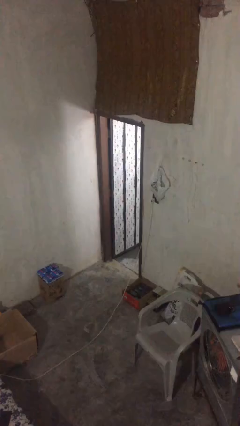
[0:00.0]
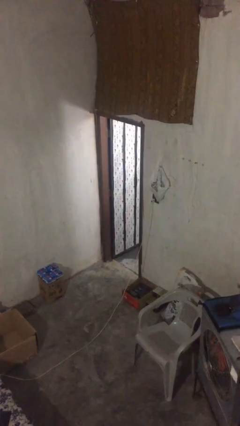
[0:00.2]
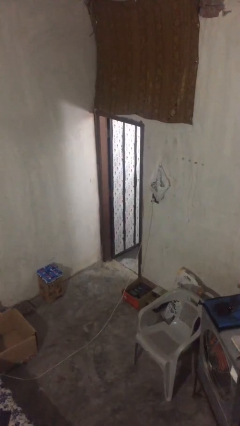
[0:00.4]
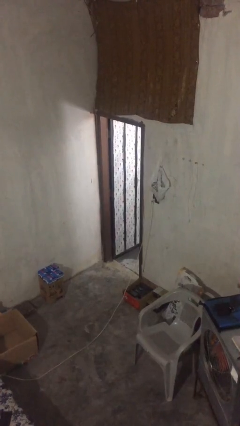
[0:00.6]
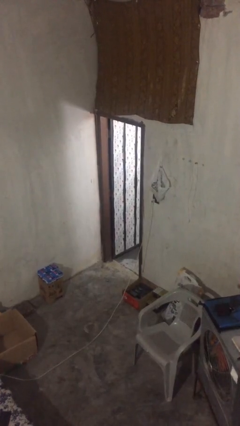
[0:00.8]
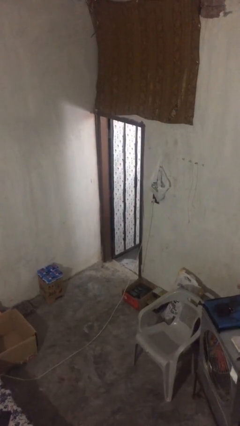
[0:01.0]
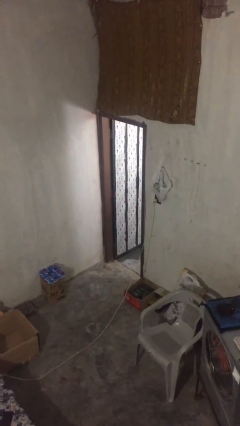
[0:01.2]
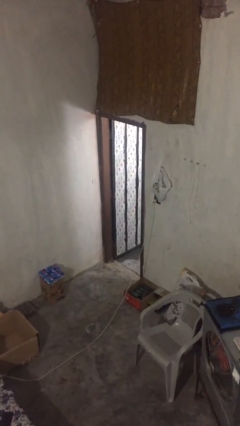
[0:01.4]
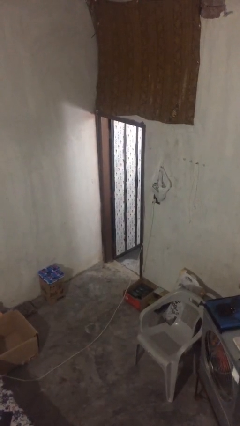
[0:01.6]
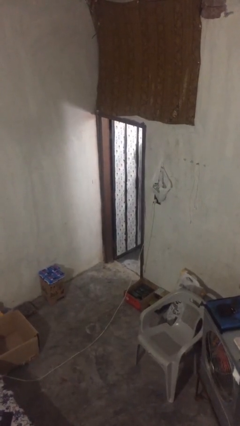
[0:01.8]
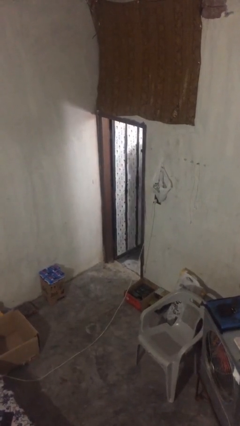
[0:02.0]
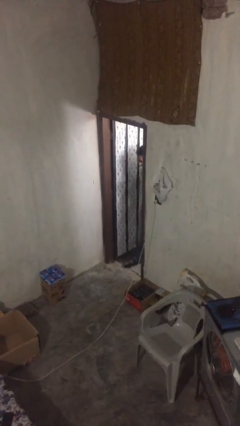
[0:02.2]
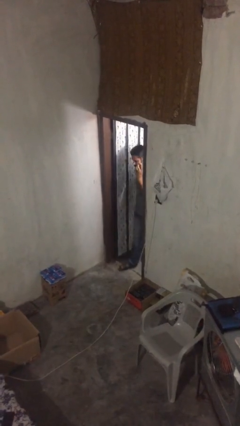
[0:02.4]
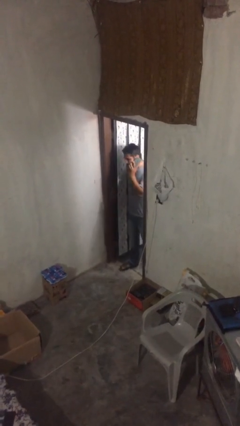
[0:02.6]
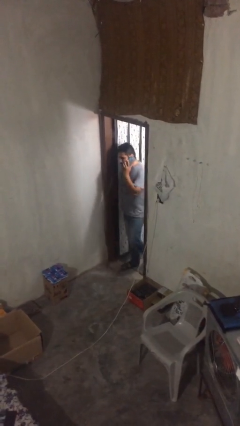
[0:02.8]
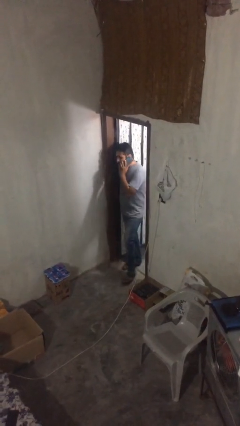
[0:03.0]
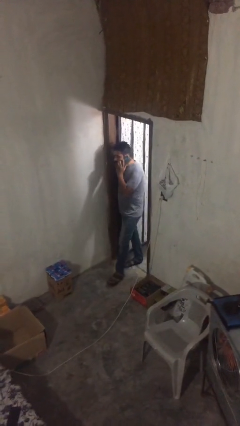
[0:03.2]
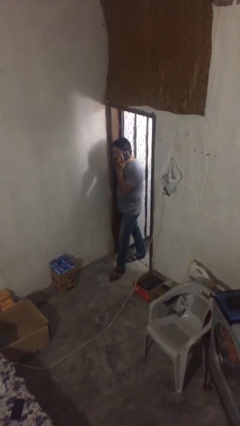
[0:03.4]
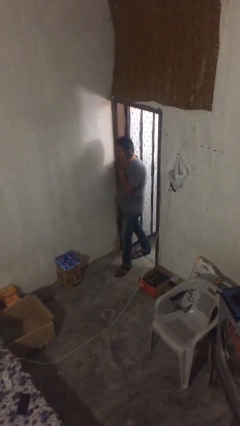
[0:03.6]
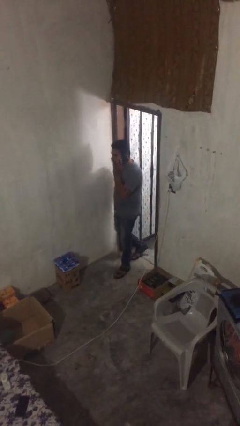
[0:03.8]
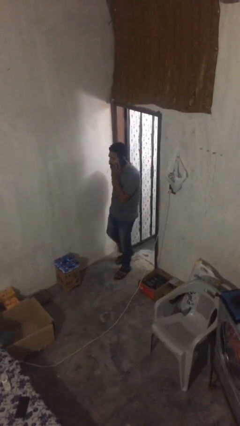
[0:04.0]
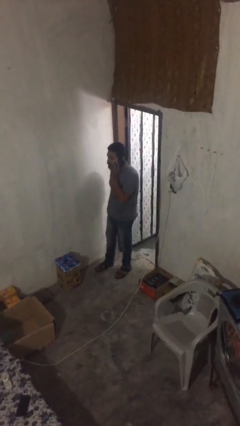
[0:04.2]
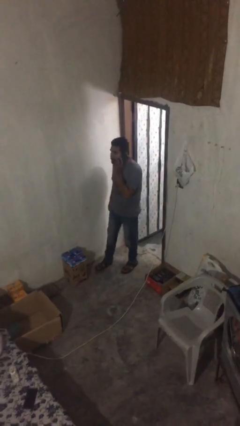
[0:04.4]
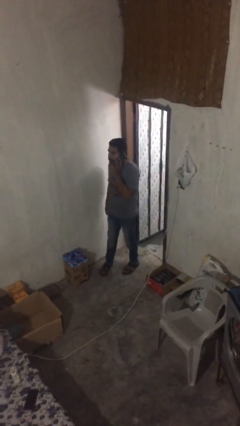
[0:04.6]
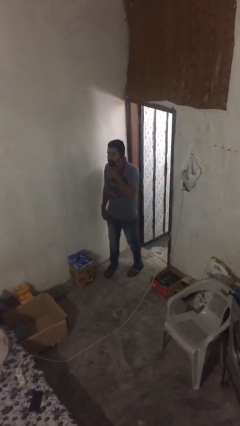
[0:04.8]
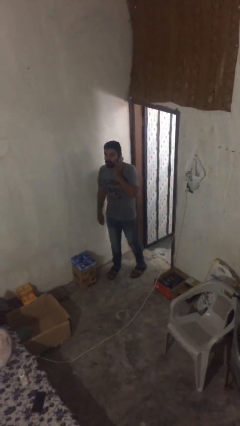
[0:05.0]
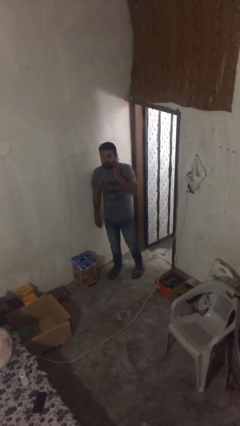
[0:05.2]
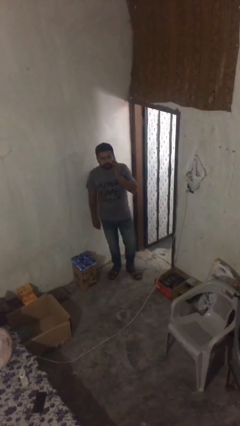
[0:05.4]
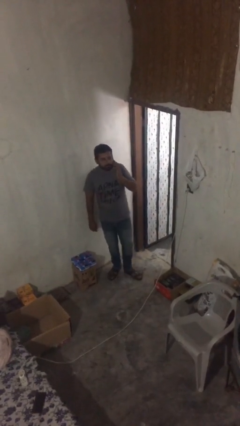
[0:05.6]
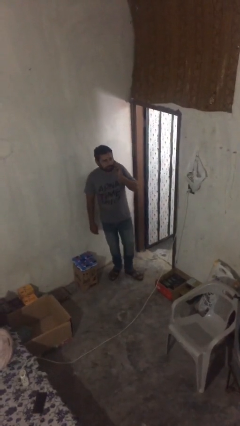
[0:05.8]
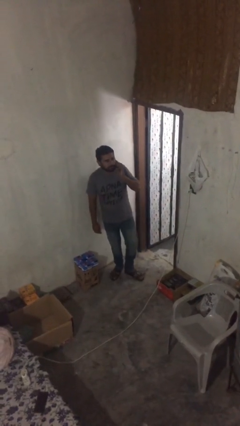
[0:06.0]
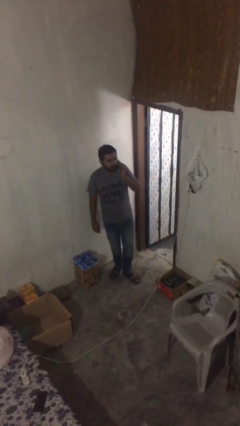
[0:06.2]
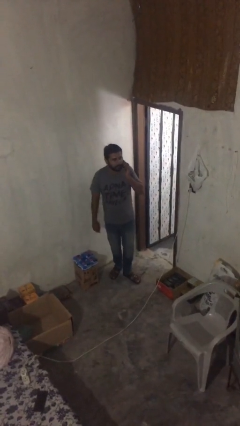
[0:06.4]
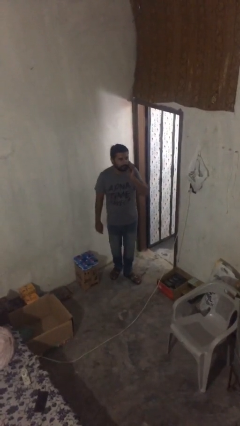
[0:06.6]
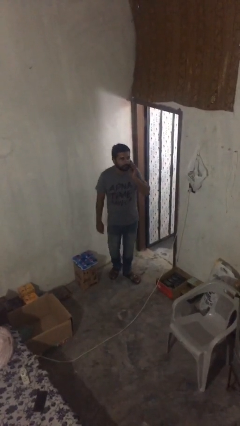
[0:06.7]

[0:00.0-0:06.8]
person enters scene through structure

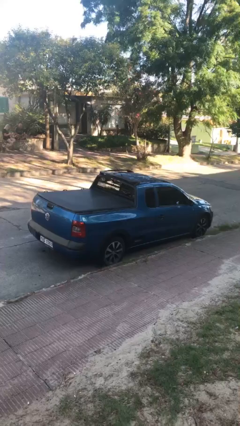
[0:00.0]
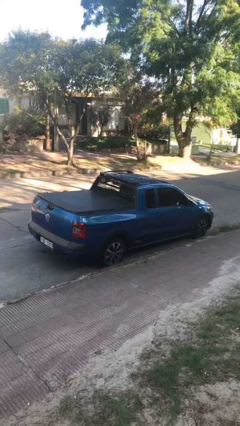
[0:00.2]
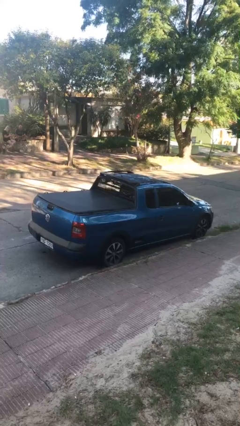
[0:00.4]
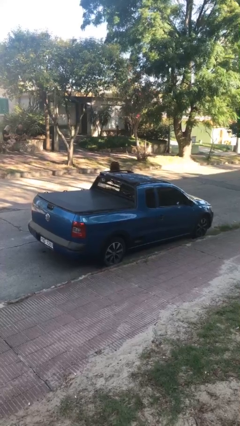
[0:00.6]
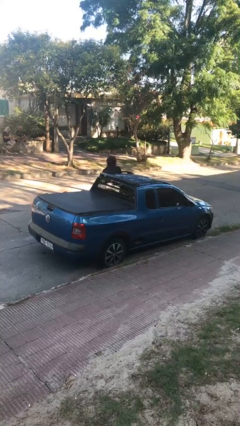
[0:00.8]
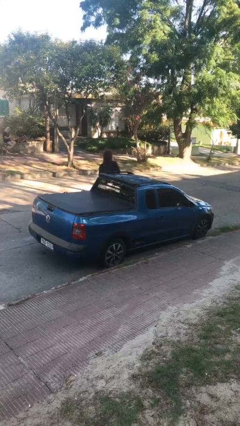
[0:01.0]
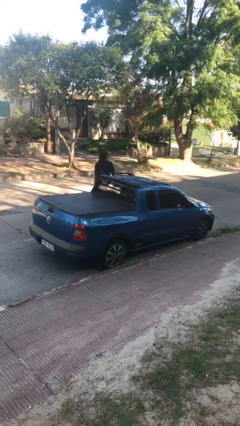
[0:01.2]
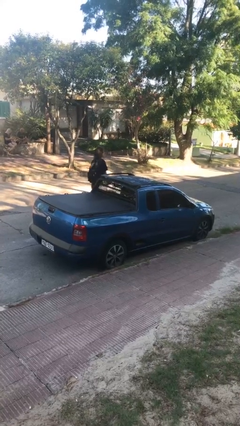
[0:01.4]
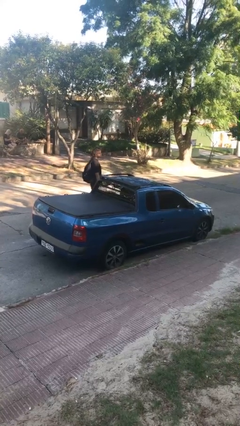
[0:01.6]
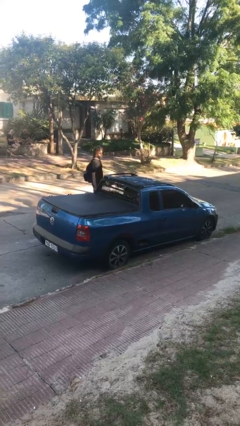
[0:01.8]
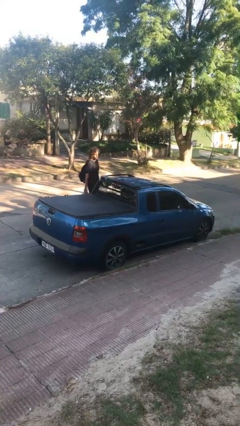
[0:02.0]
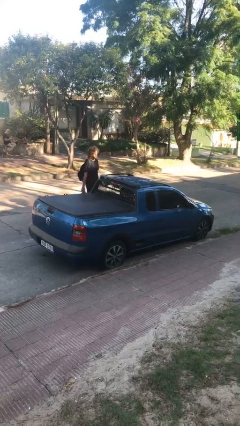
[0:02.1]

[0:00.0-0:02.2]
car drops off person

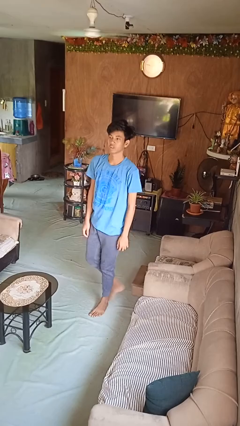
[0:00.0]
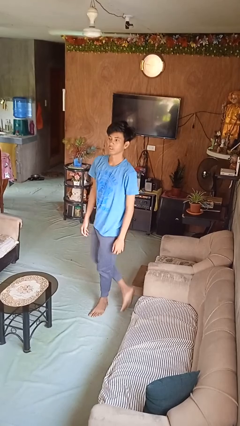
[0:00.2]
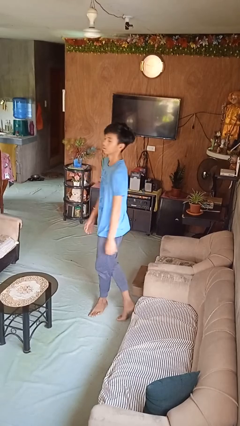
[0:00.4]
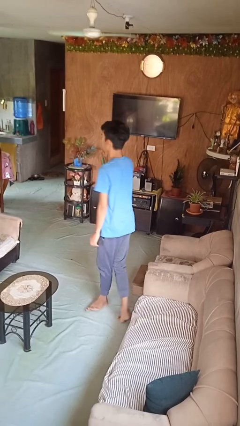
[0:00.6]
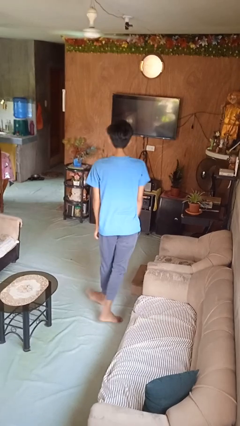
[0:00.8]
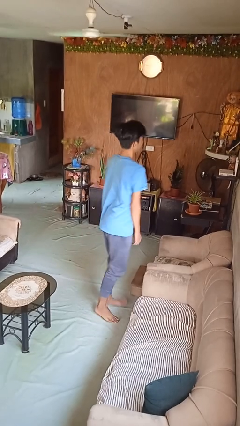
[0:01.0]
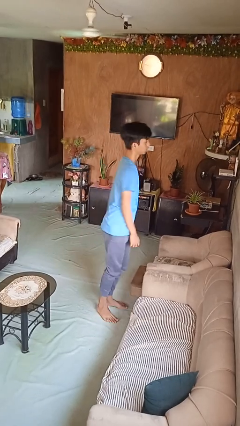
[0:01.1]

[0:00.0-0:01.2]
person twirls

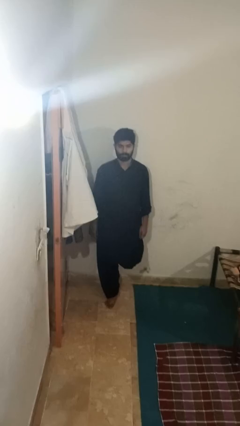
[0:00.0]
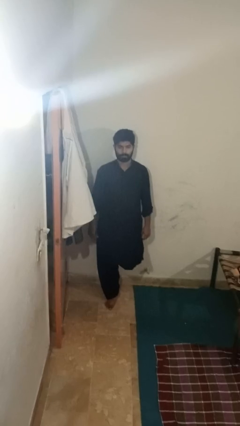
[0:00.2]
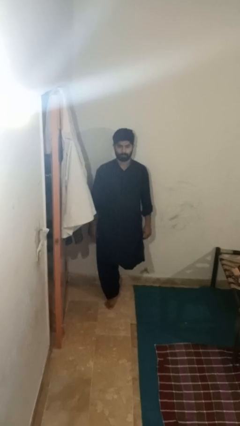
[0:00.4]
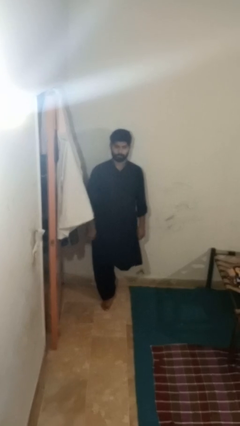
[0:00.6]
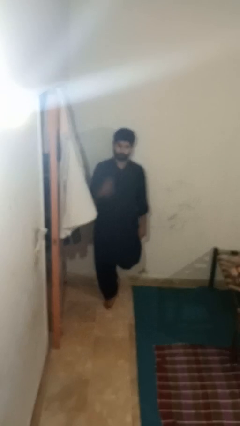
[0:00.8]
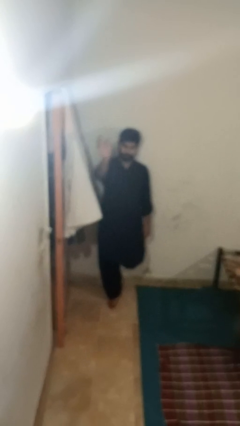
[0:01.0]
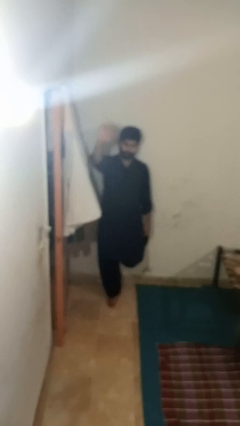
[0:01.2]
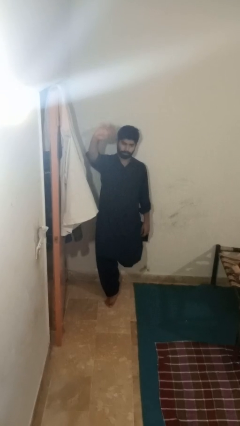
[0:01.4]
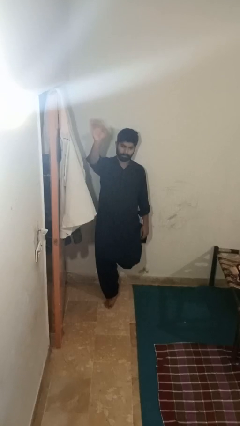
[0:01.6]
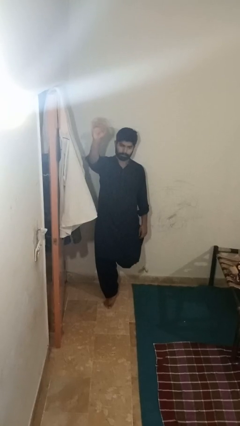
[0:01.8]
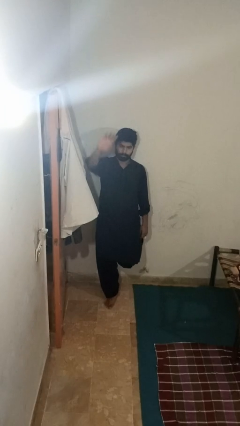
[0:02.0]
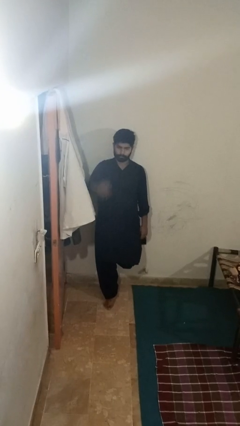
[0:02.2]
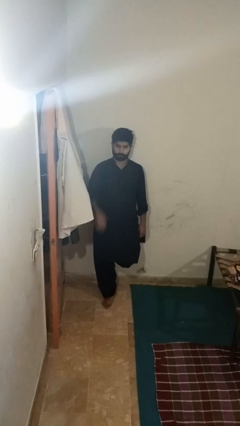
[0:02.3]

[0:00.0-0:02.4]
person waves at person

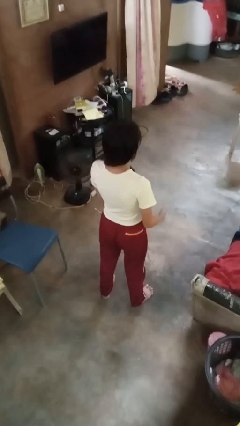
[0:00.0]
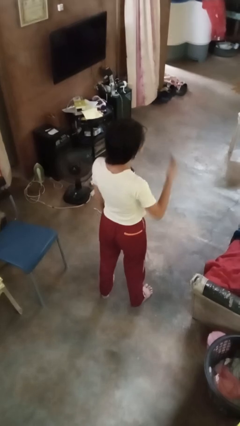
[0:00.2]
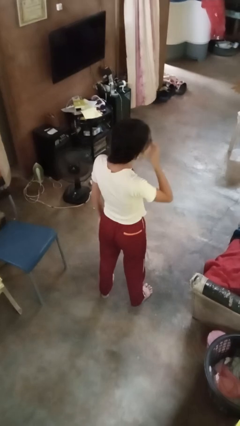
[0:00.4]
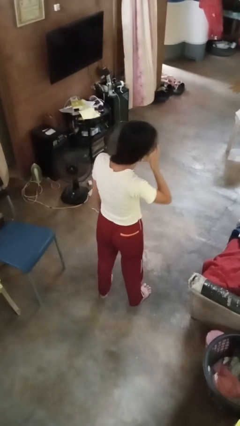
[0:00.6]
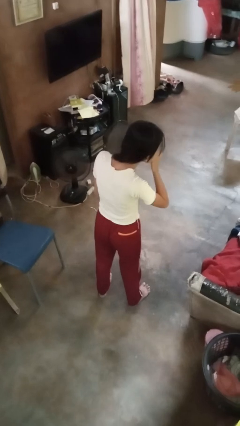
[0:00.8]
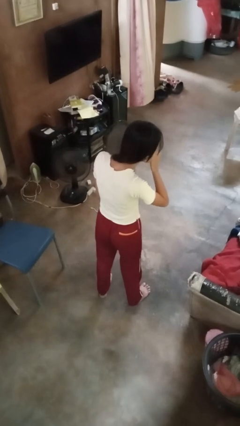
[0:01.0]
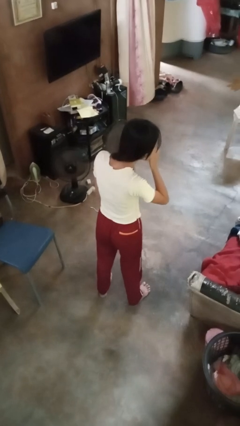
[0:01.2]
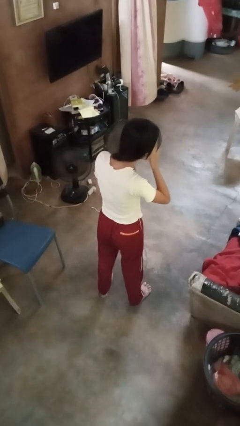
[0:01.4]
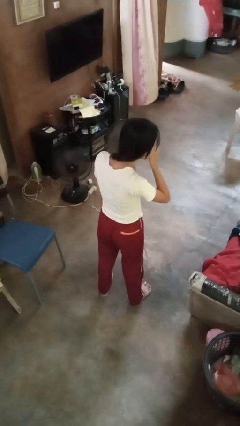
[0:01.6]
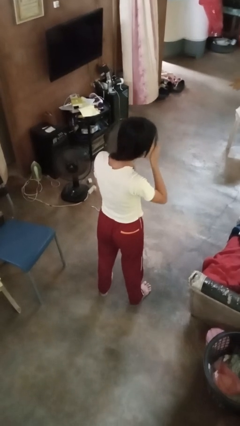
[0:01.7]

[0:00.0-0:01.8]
person sneezes into hand

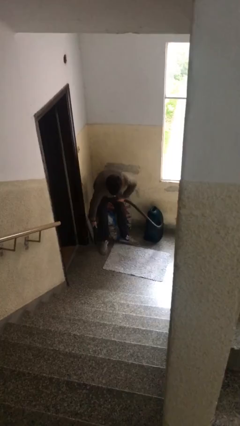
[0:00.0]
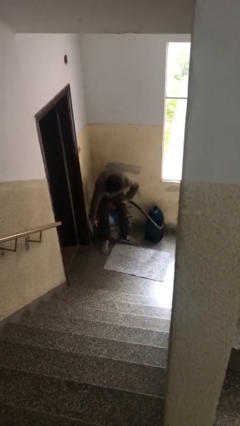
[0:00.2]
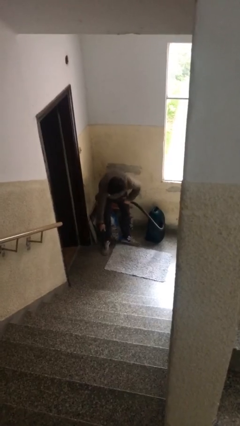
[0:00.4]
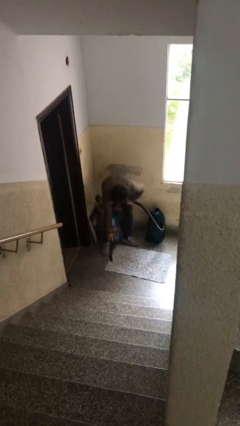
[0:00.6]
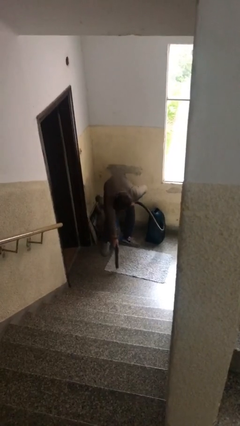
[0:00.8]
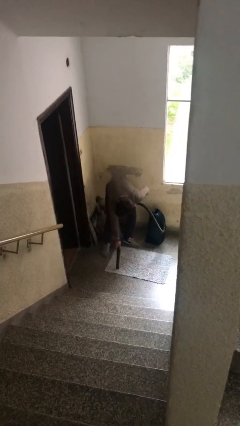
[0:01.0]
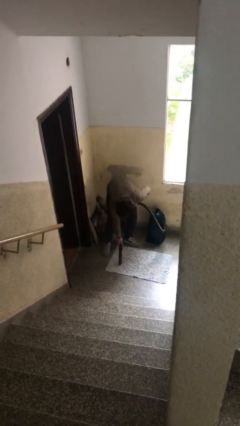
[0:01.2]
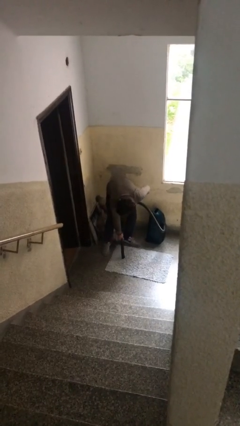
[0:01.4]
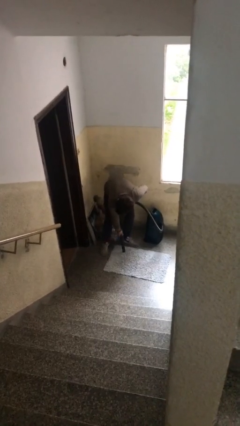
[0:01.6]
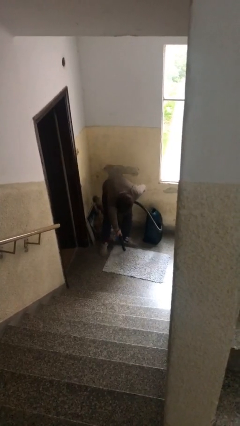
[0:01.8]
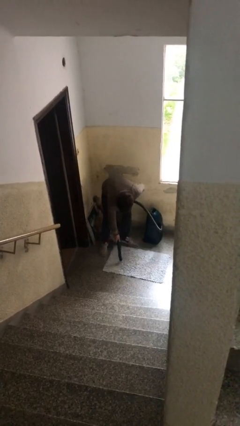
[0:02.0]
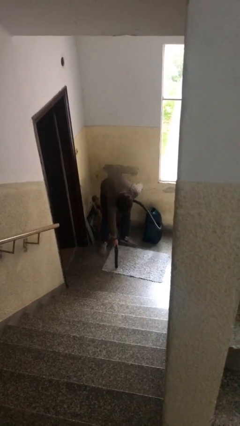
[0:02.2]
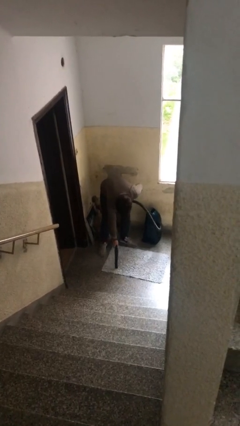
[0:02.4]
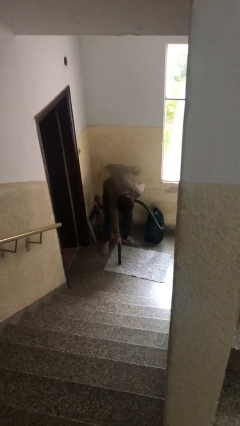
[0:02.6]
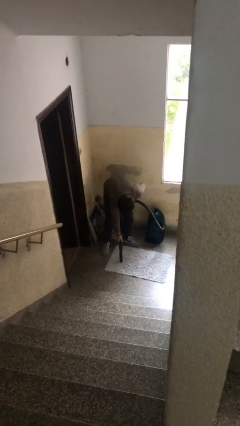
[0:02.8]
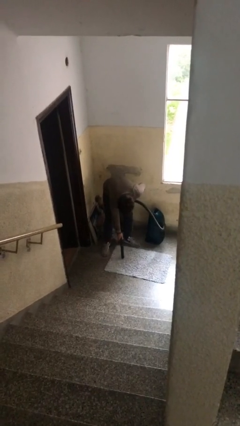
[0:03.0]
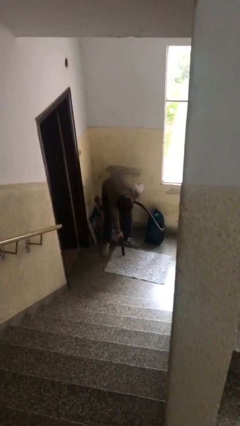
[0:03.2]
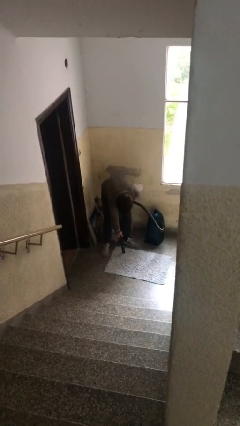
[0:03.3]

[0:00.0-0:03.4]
person vacuums carpet
